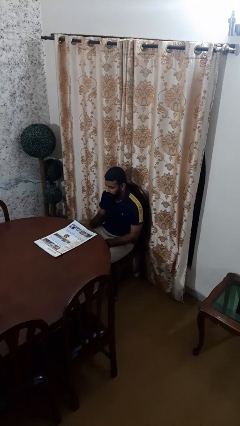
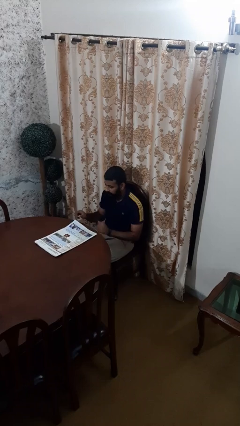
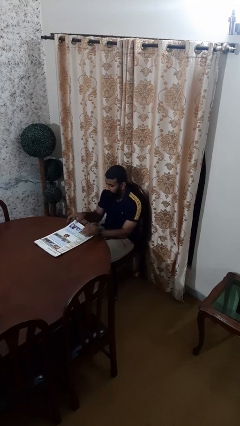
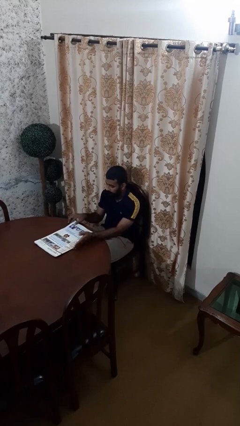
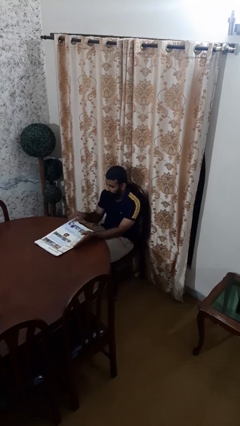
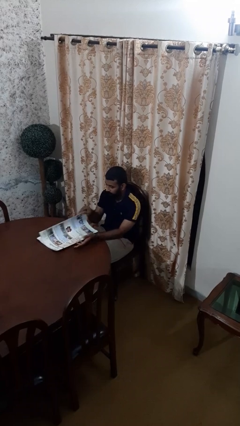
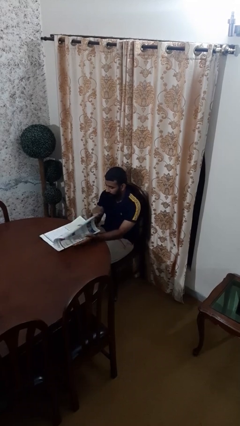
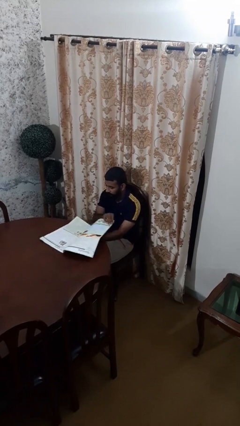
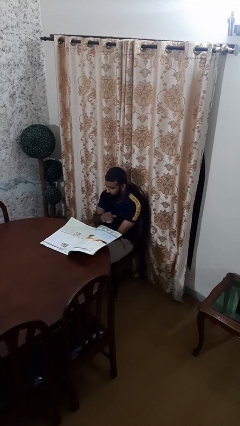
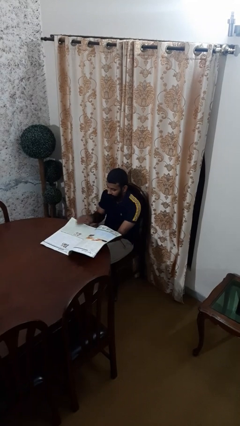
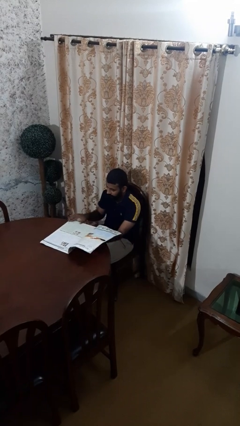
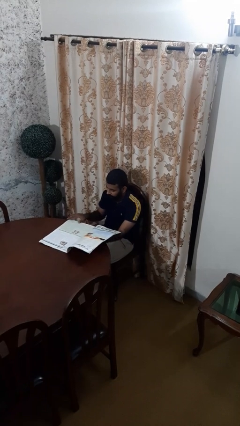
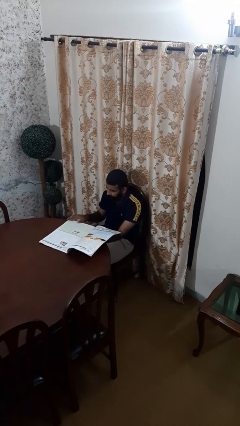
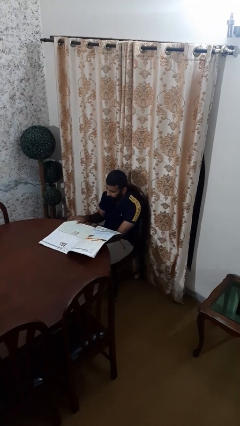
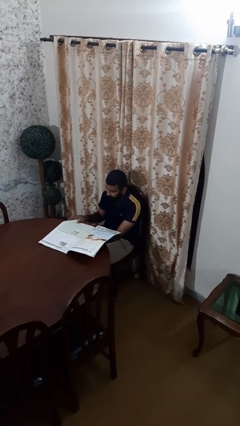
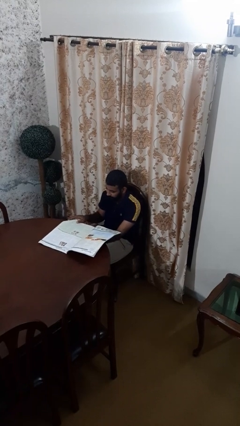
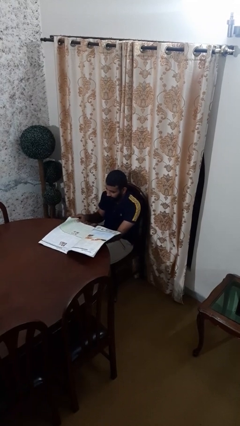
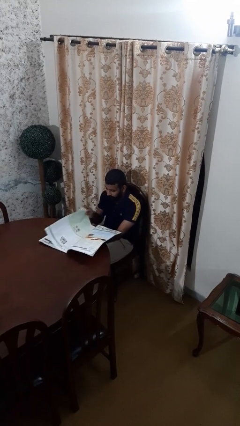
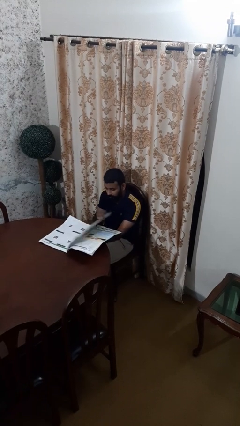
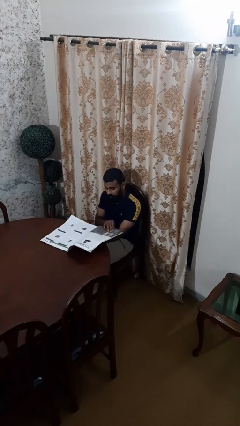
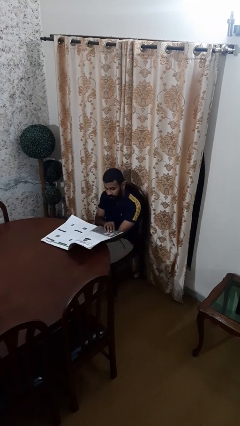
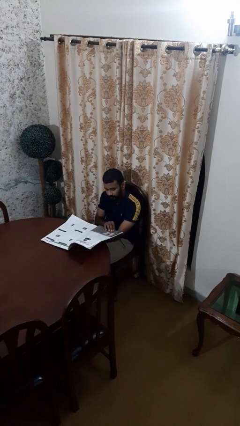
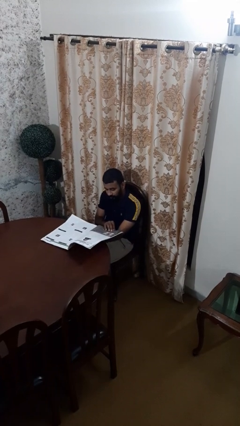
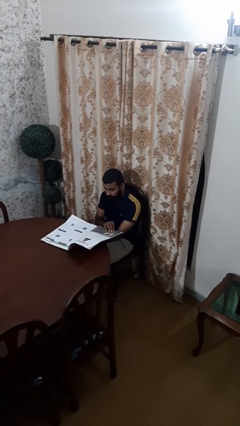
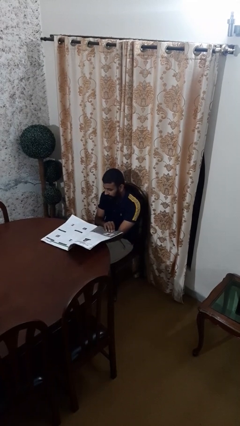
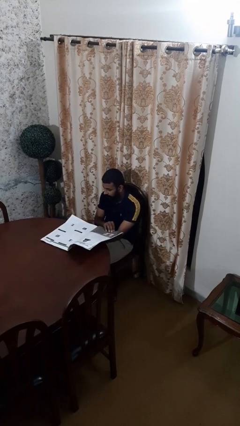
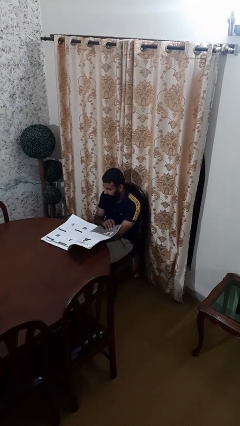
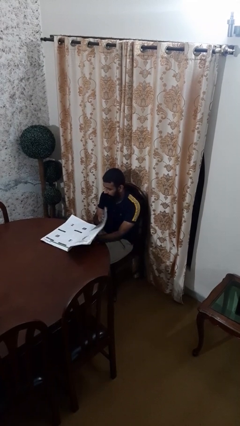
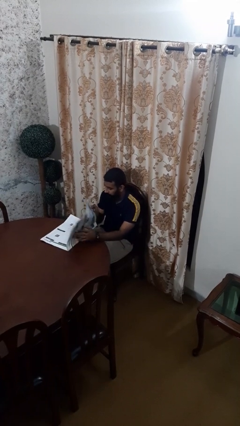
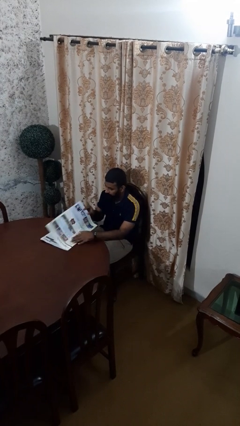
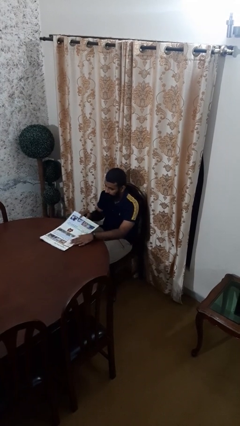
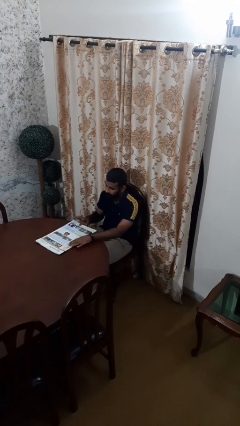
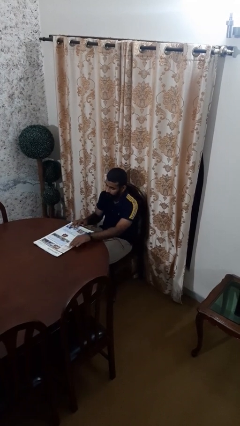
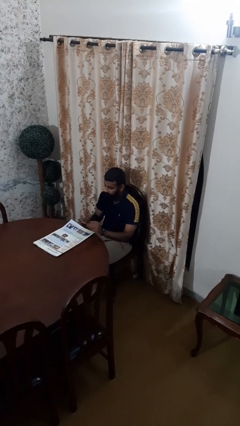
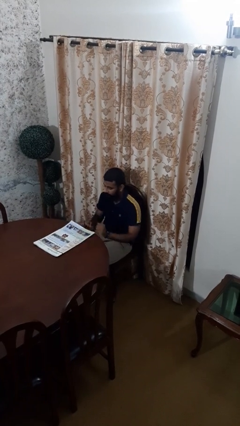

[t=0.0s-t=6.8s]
person reads magazine

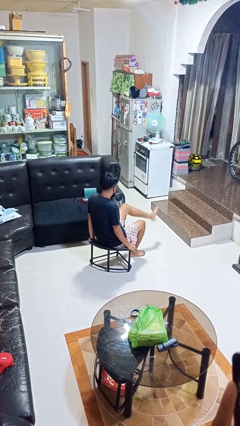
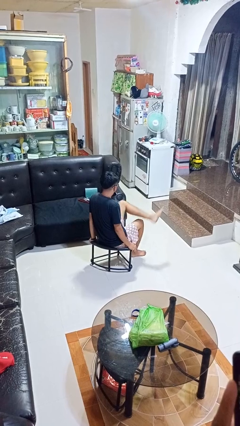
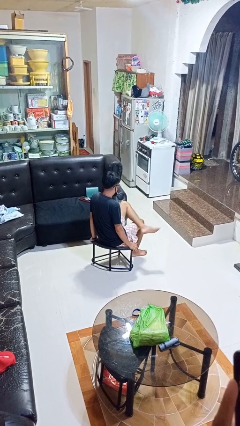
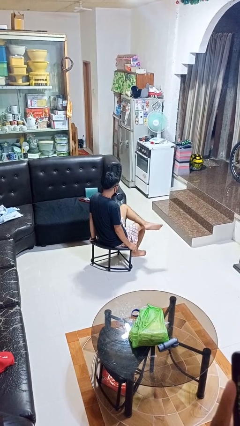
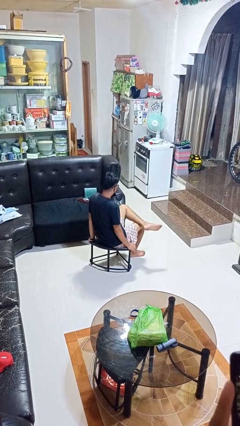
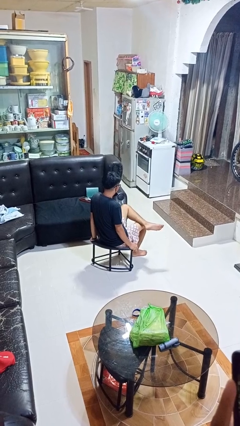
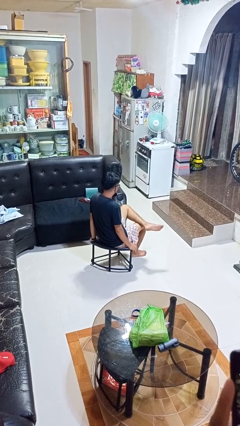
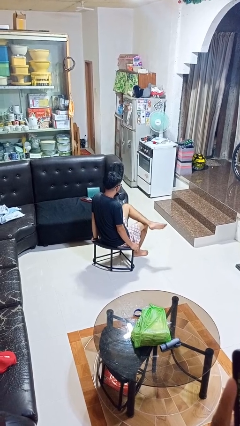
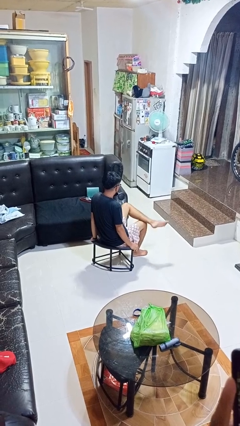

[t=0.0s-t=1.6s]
person crosses legs

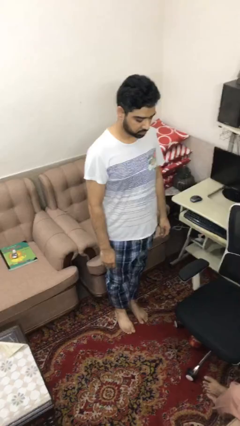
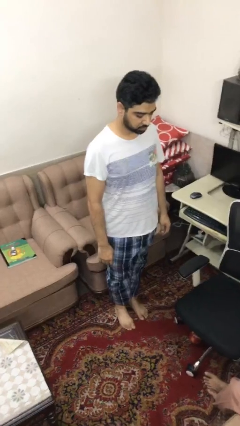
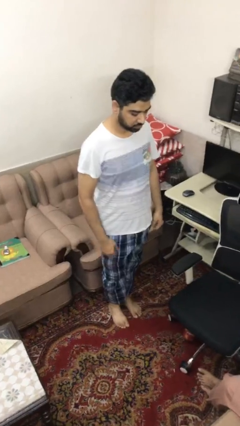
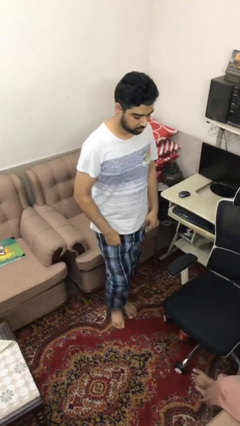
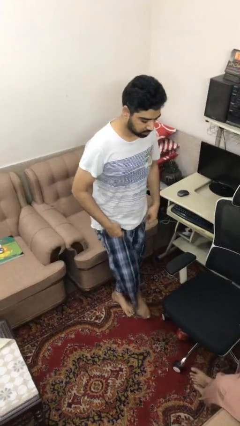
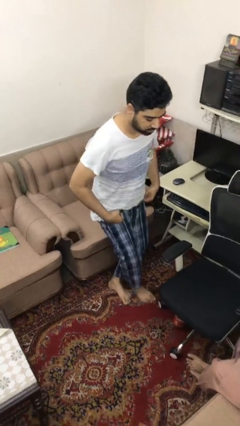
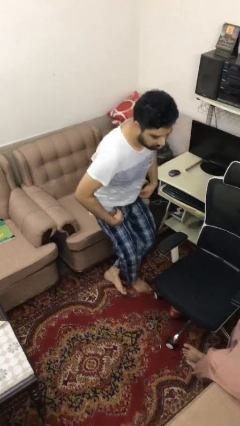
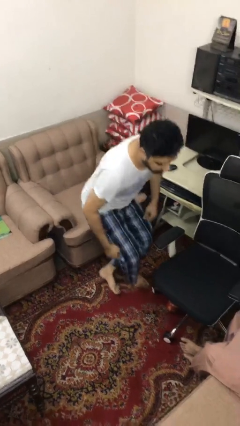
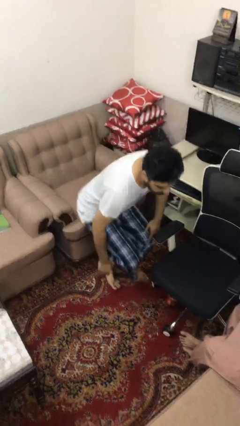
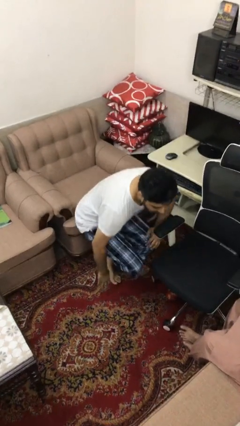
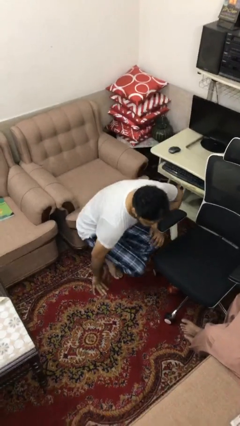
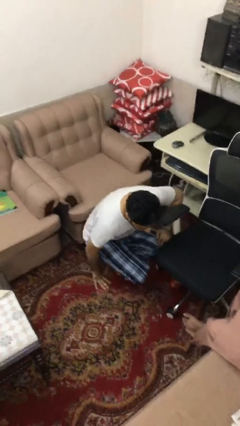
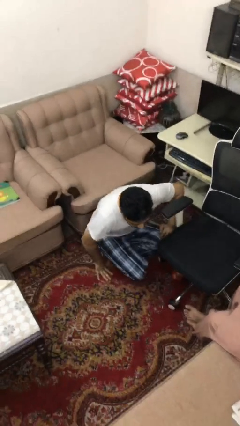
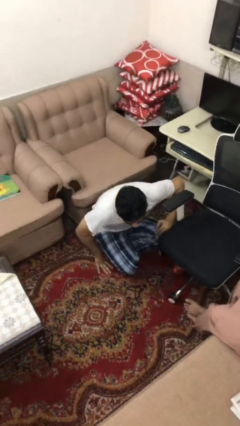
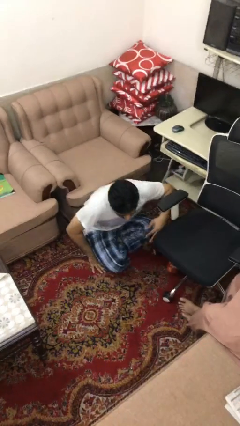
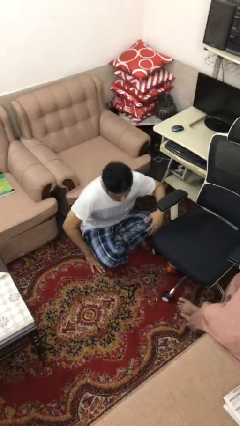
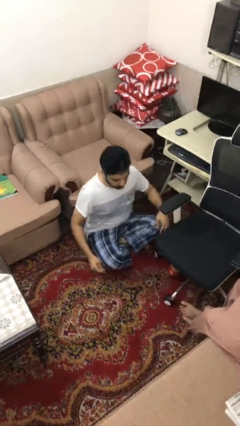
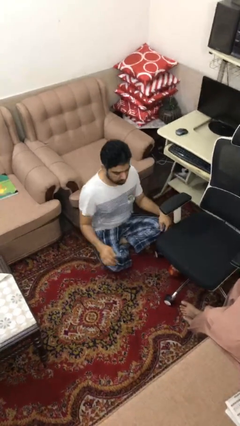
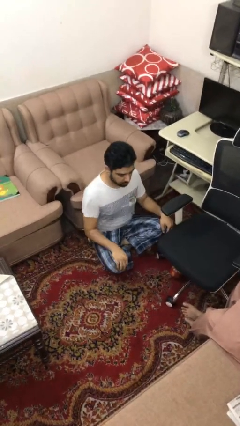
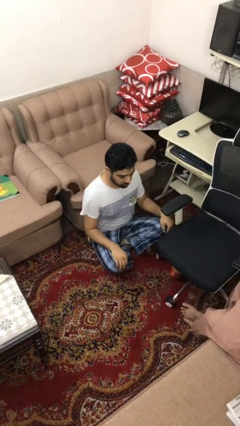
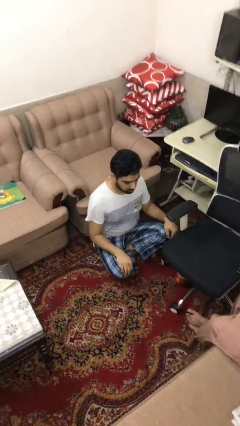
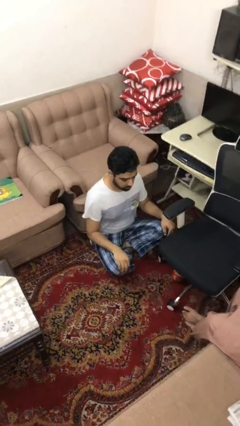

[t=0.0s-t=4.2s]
person sits crisscross

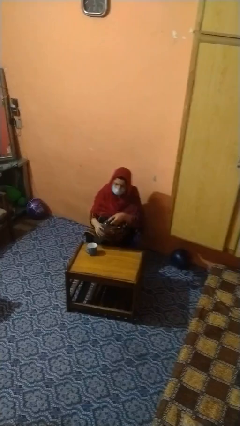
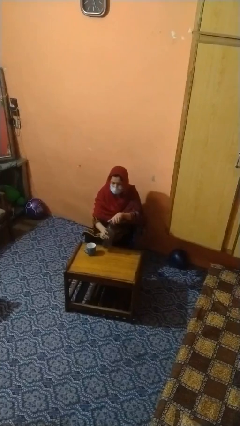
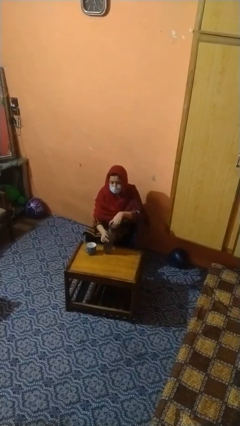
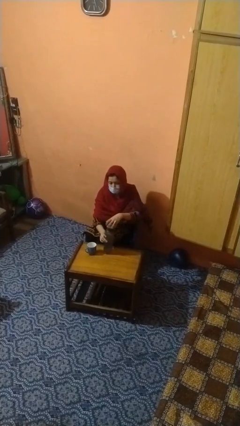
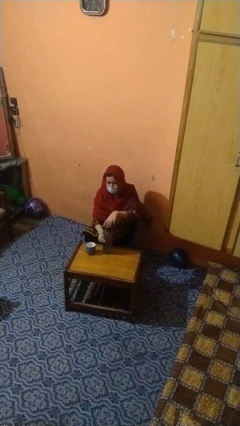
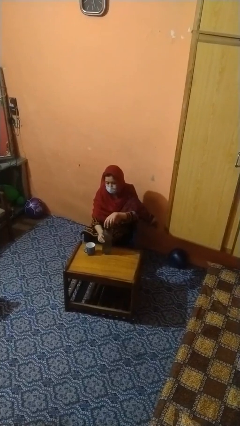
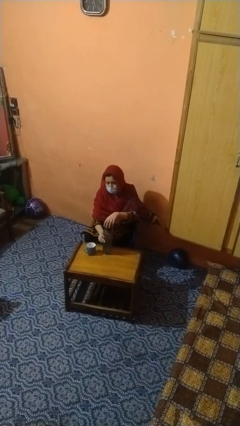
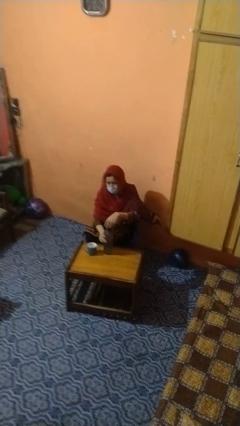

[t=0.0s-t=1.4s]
person screws lid to bottle

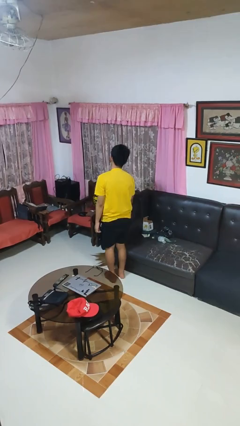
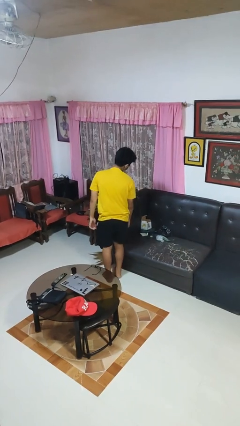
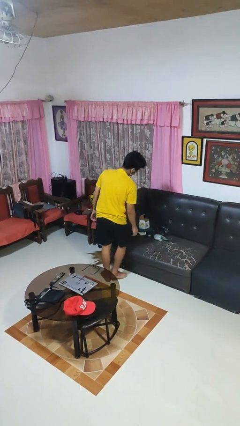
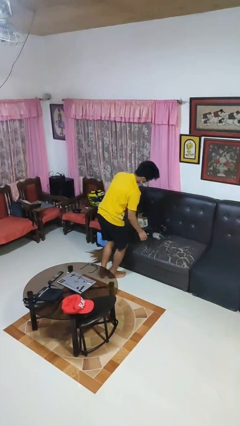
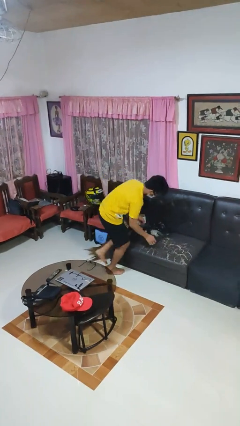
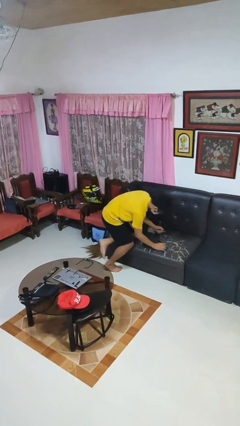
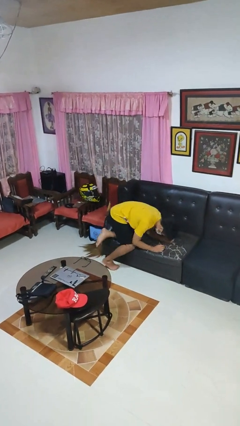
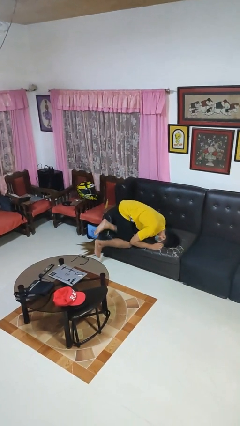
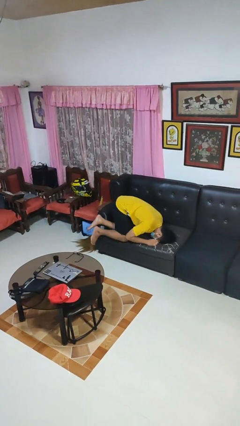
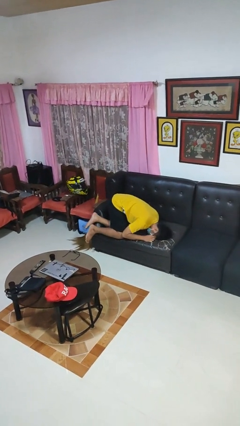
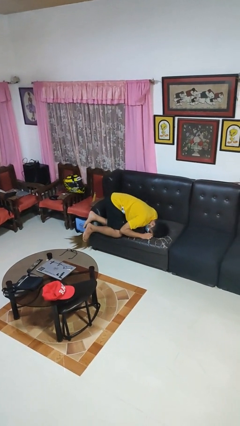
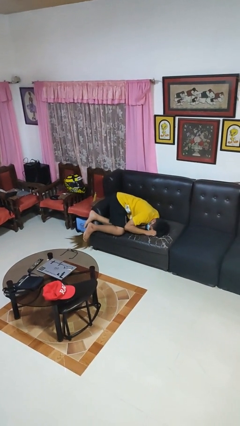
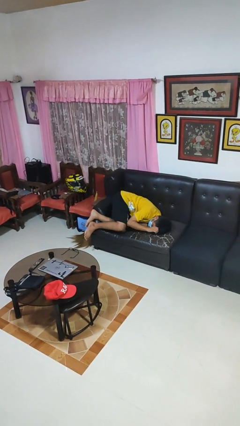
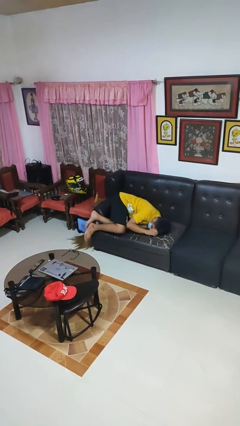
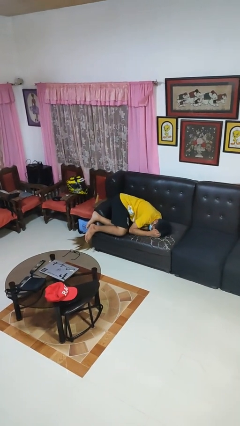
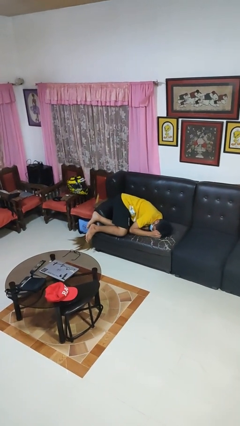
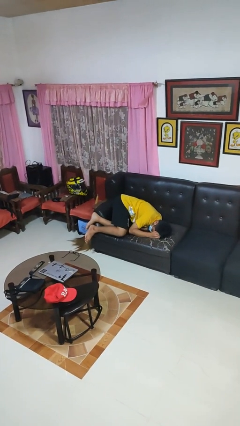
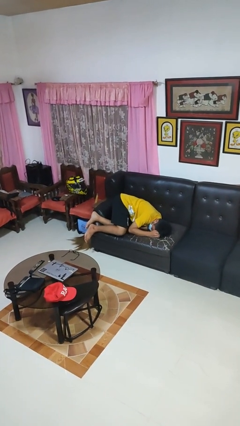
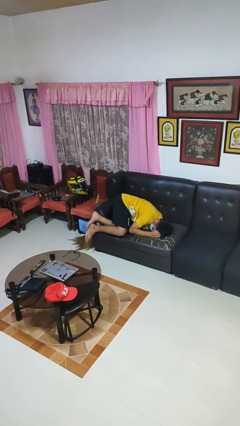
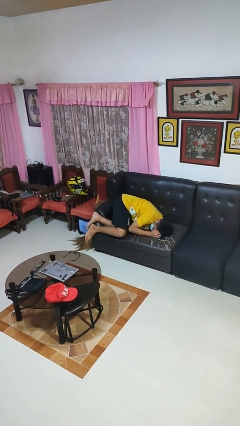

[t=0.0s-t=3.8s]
person lies down on couch
